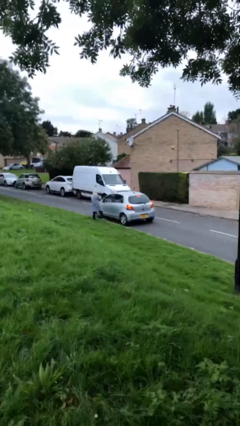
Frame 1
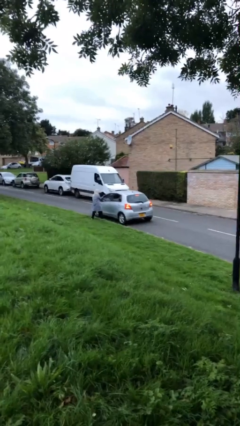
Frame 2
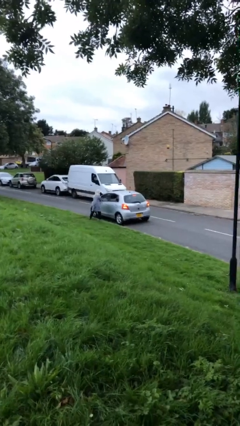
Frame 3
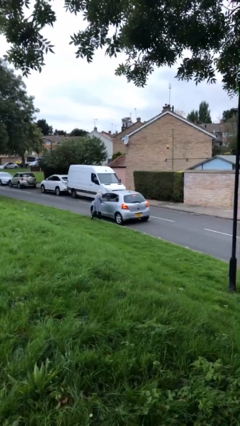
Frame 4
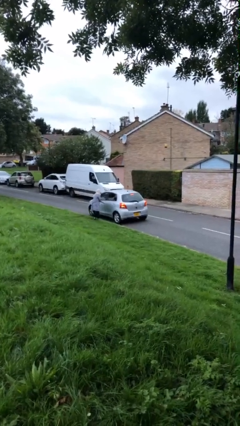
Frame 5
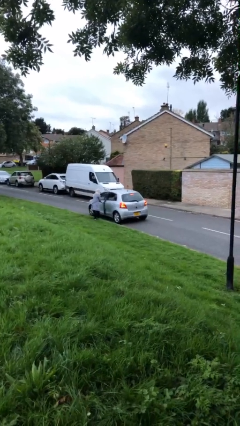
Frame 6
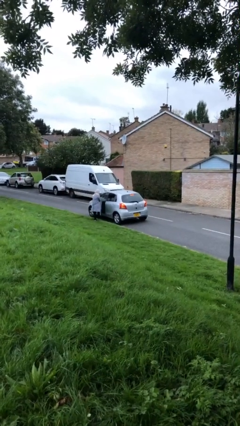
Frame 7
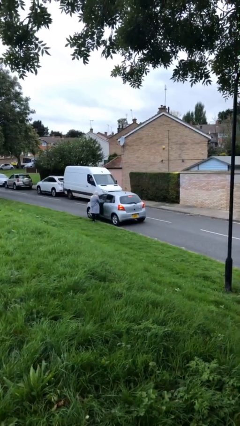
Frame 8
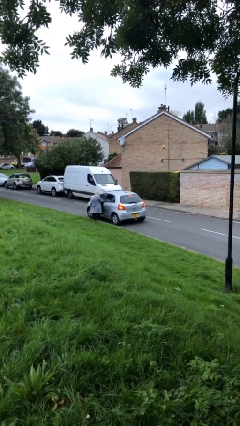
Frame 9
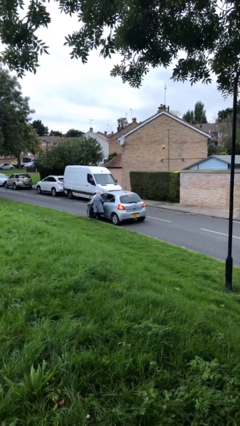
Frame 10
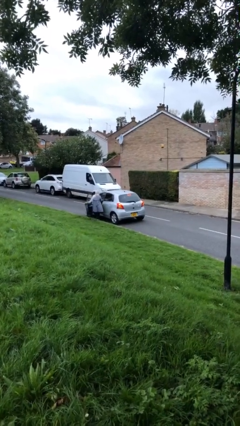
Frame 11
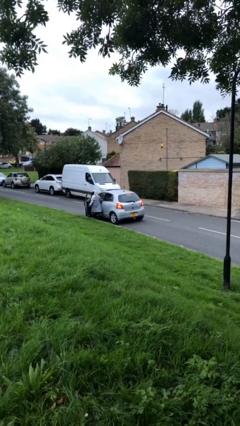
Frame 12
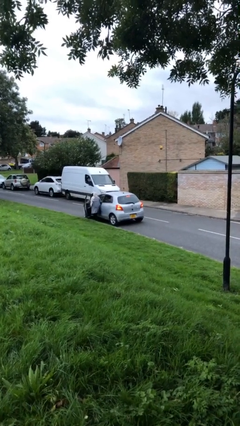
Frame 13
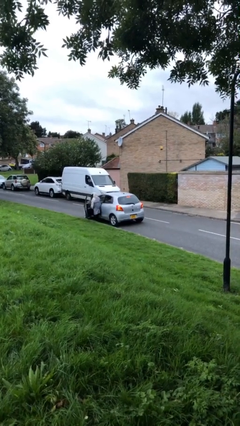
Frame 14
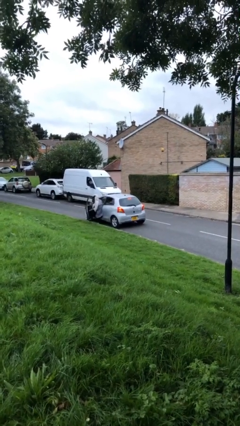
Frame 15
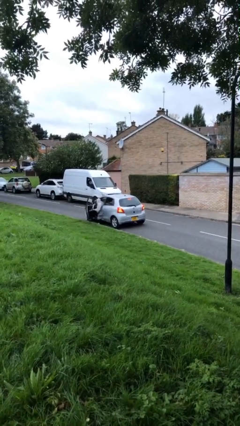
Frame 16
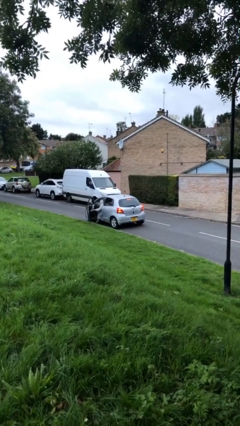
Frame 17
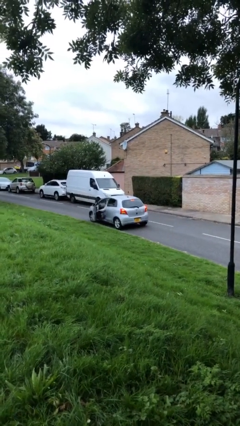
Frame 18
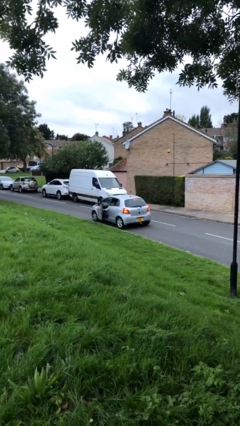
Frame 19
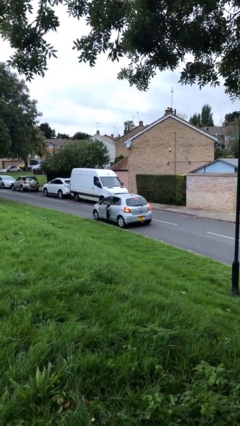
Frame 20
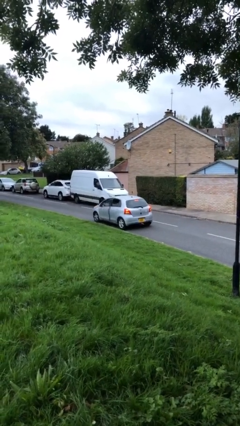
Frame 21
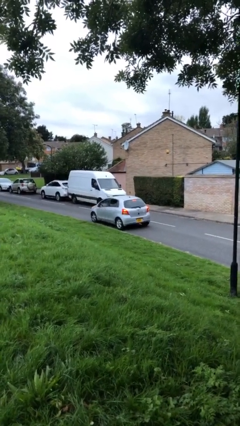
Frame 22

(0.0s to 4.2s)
car picks up person

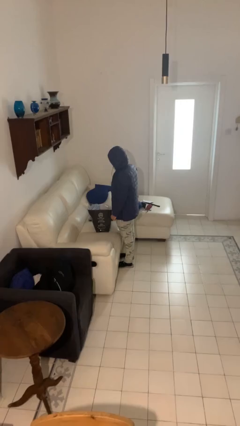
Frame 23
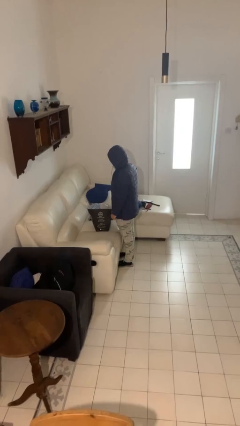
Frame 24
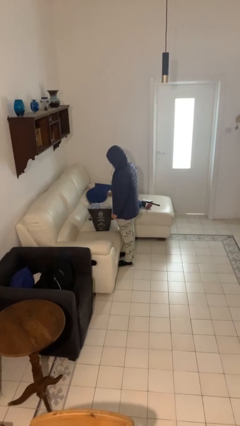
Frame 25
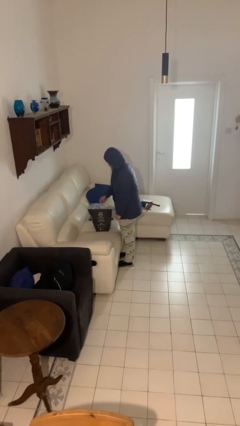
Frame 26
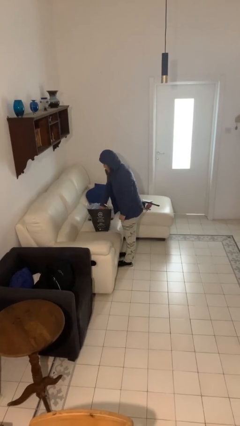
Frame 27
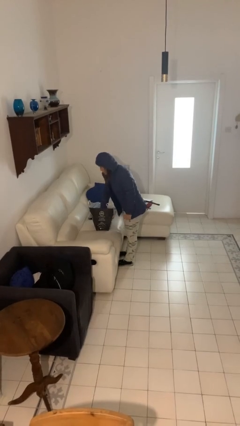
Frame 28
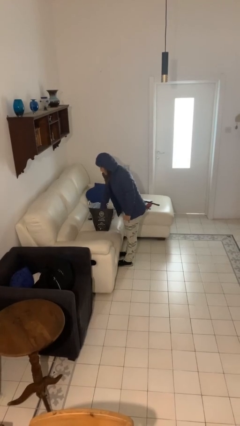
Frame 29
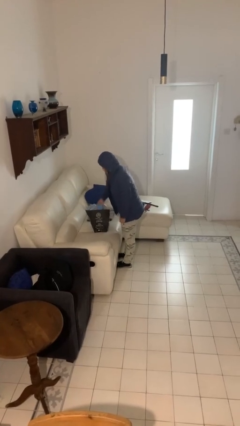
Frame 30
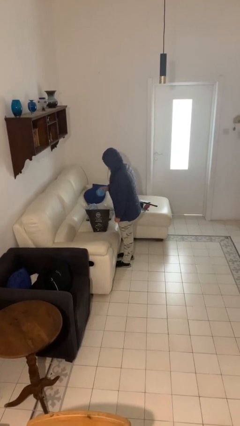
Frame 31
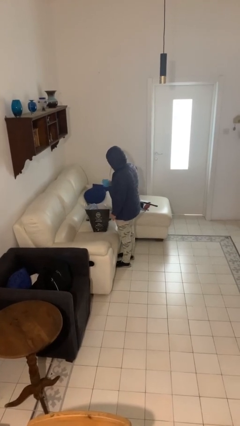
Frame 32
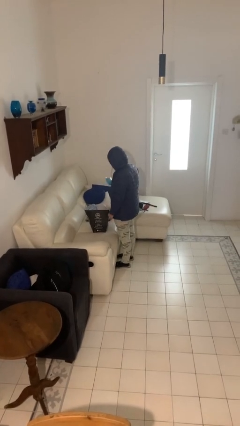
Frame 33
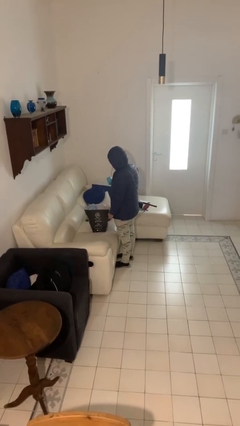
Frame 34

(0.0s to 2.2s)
person takes object from bag

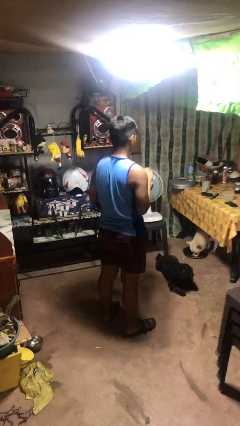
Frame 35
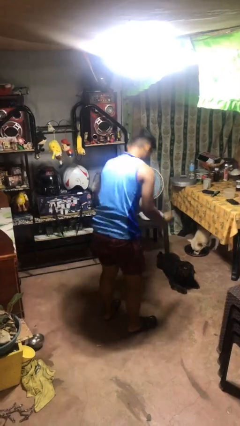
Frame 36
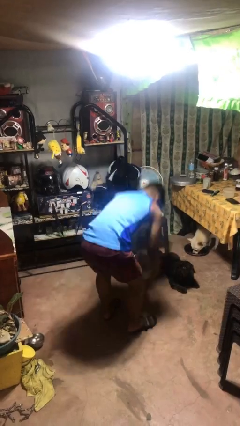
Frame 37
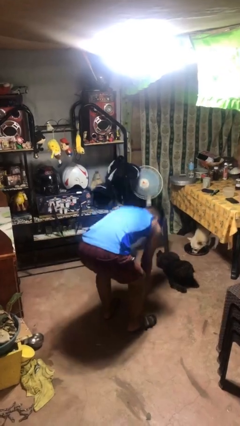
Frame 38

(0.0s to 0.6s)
person drops object

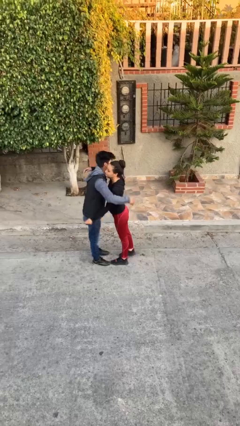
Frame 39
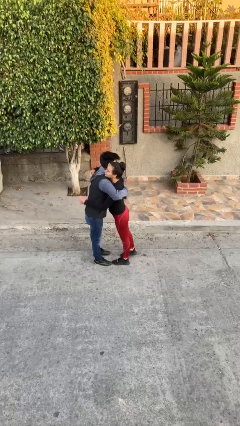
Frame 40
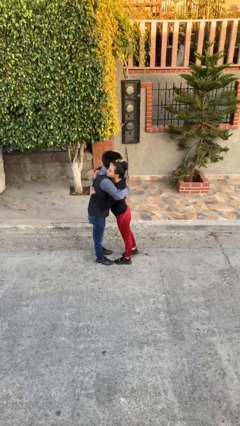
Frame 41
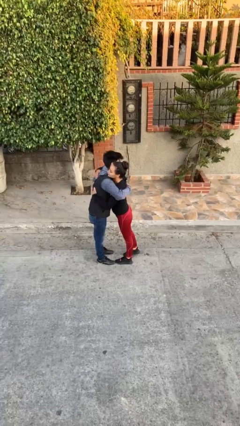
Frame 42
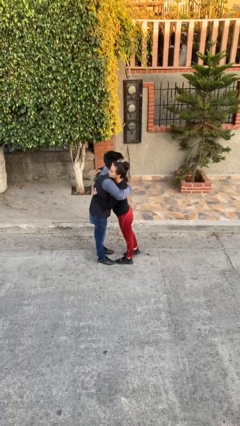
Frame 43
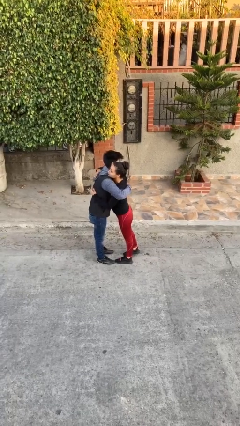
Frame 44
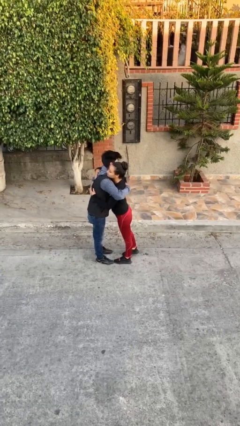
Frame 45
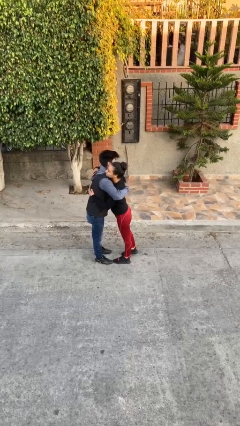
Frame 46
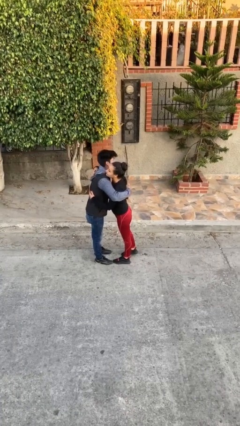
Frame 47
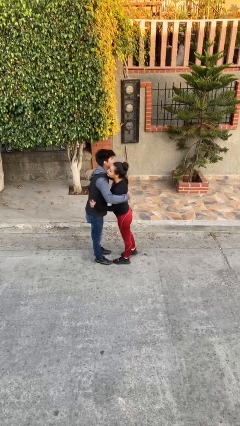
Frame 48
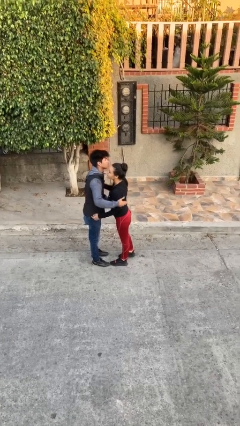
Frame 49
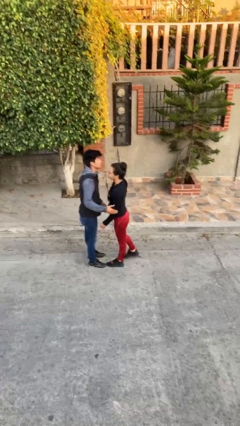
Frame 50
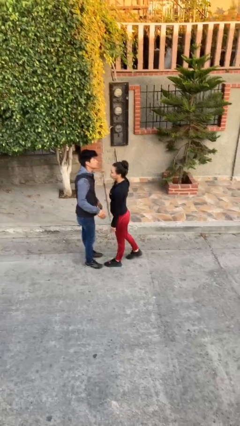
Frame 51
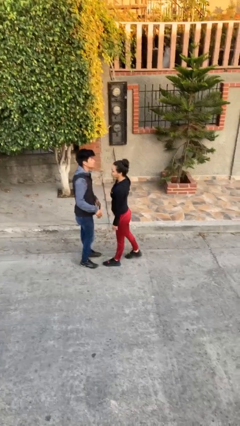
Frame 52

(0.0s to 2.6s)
person embraces person

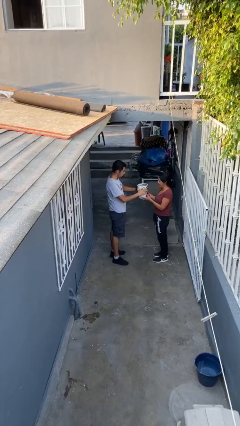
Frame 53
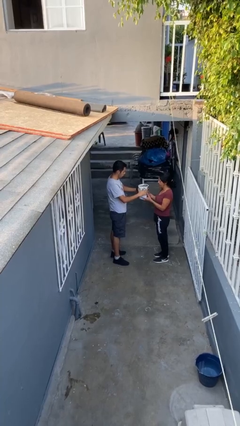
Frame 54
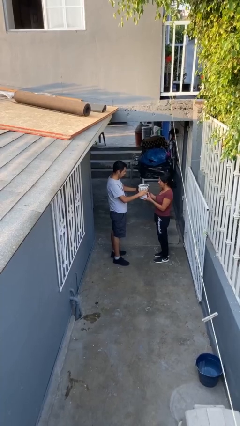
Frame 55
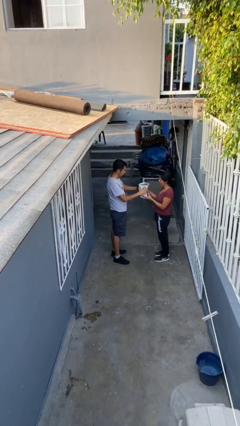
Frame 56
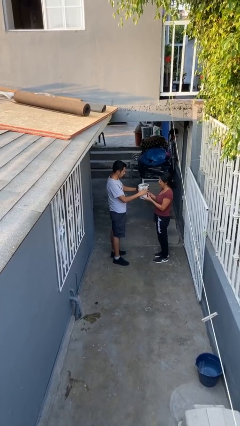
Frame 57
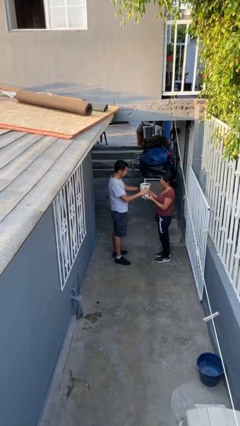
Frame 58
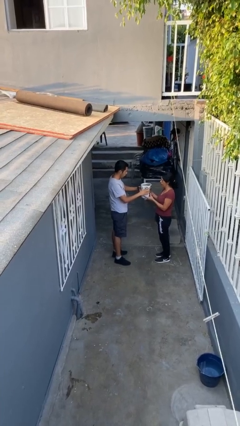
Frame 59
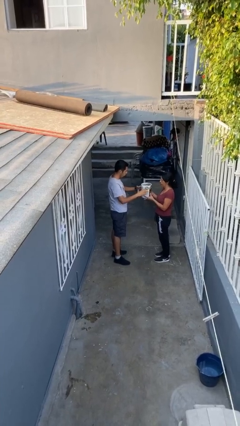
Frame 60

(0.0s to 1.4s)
person transfers object to person

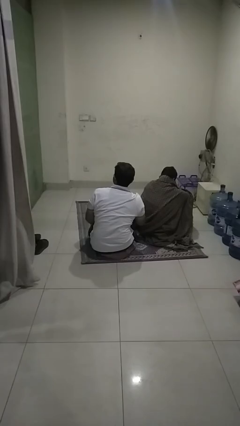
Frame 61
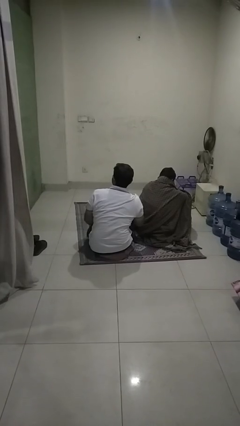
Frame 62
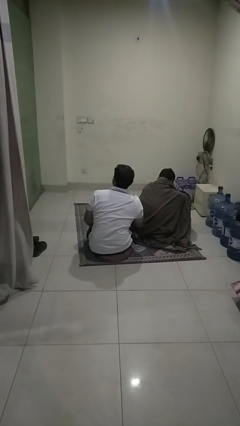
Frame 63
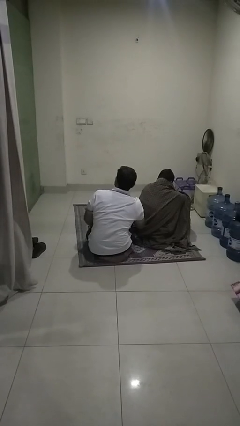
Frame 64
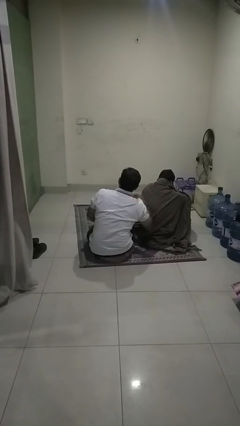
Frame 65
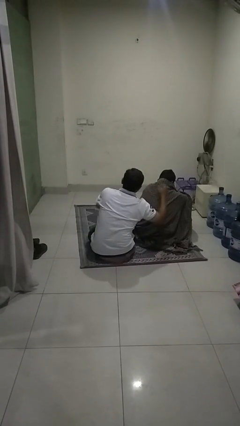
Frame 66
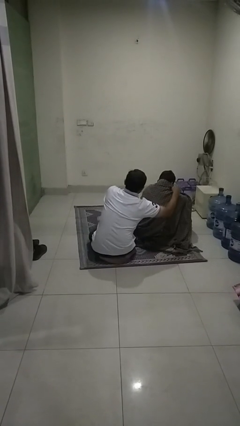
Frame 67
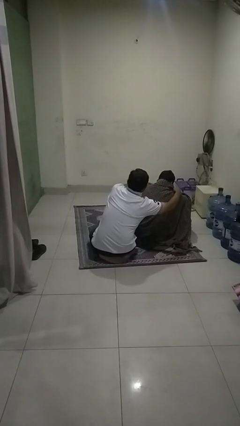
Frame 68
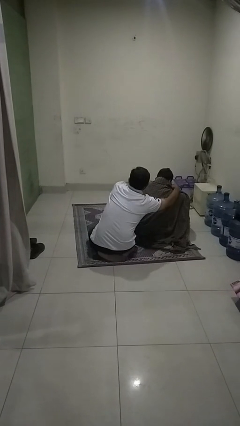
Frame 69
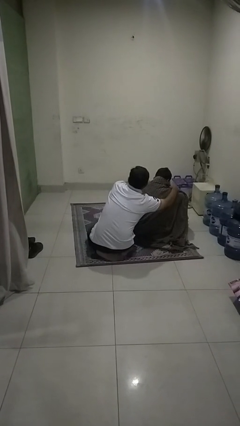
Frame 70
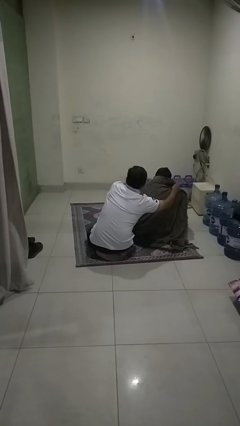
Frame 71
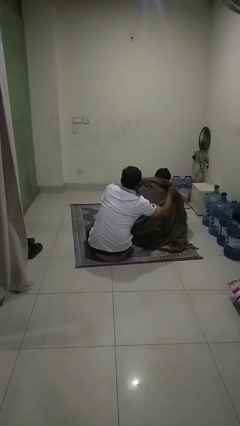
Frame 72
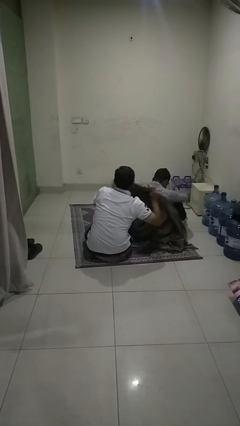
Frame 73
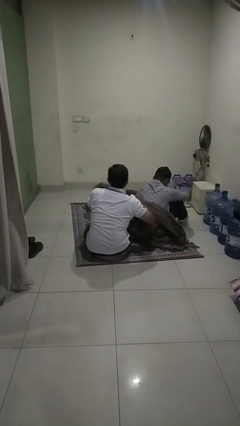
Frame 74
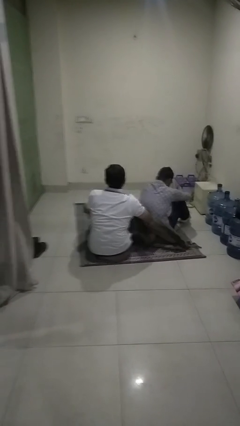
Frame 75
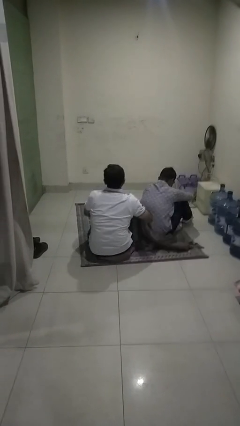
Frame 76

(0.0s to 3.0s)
person uncovers friend with blanket

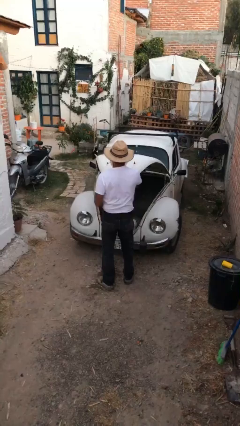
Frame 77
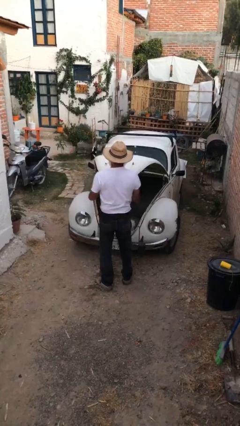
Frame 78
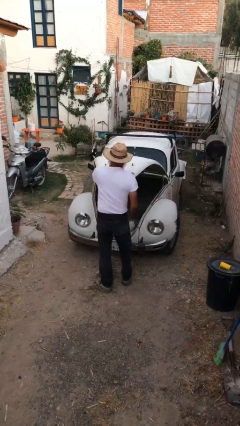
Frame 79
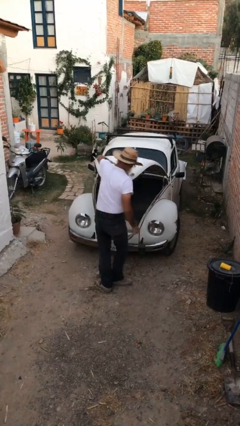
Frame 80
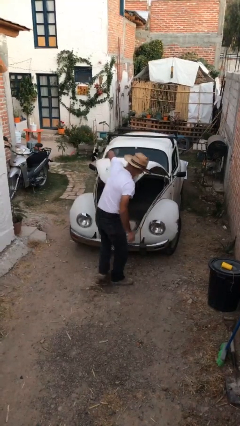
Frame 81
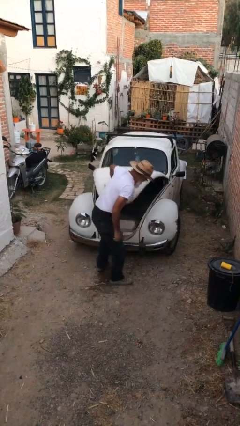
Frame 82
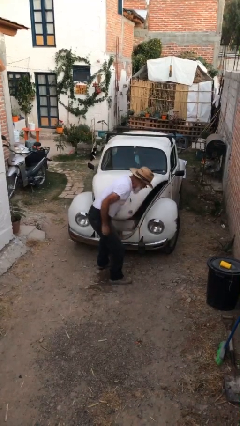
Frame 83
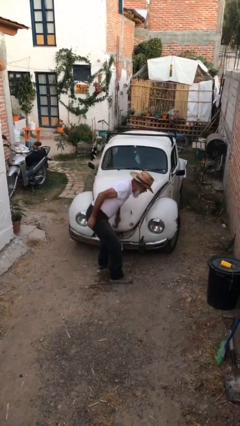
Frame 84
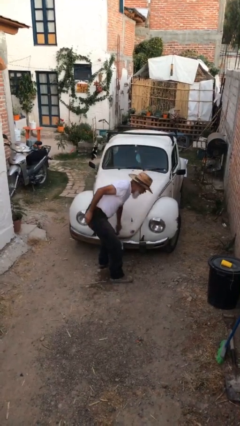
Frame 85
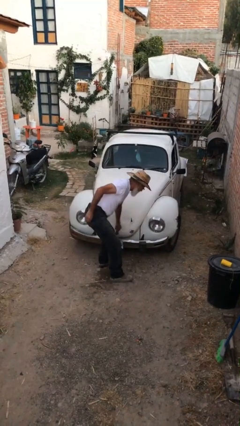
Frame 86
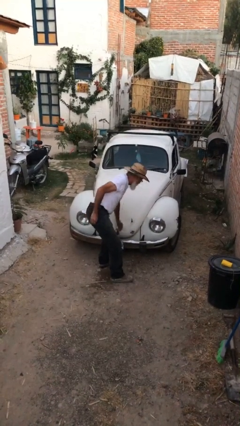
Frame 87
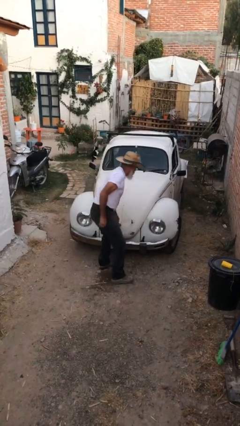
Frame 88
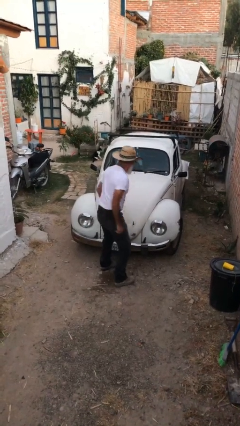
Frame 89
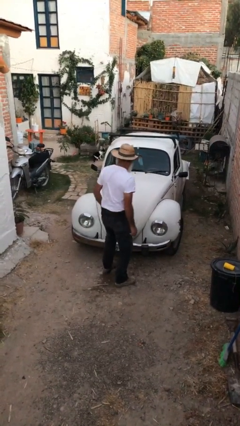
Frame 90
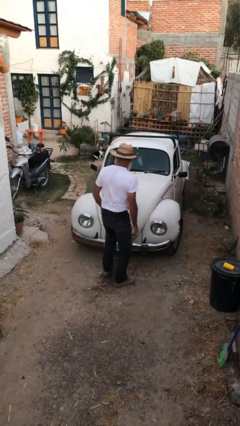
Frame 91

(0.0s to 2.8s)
person closes car trunk

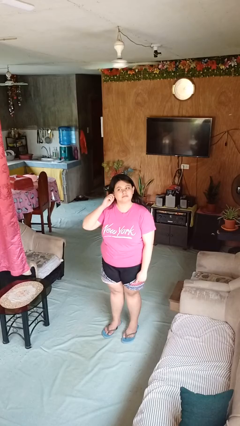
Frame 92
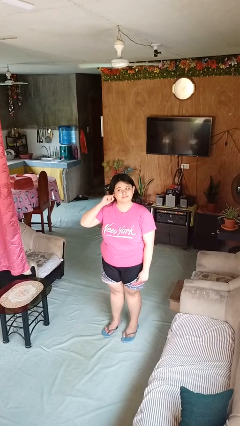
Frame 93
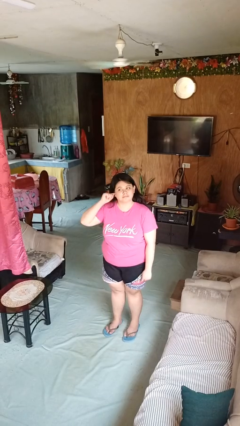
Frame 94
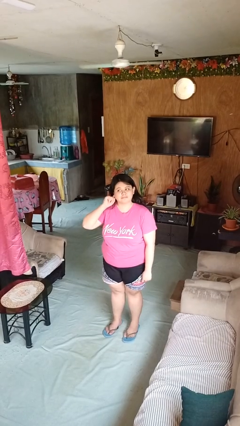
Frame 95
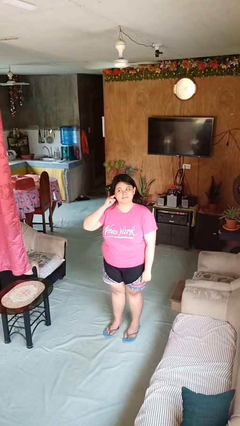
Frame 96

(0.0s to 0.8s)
person touches earlobe
